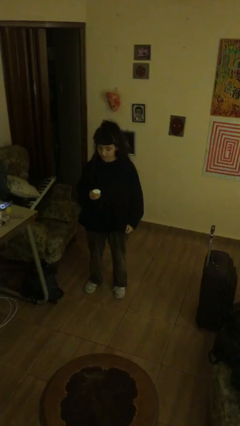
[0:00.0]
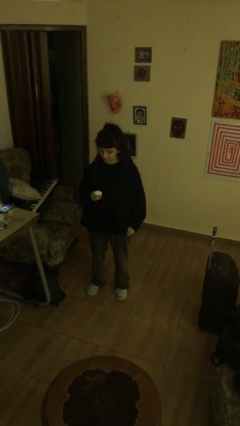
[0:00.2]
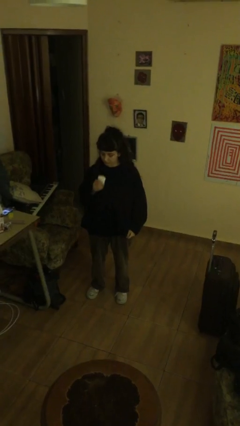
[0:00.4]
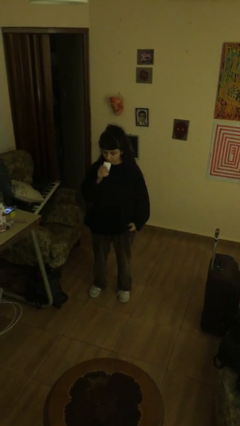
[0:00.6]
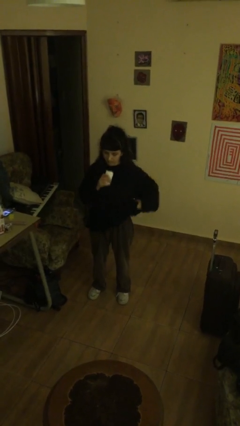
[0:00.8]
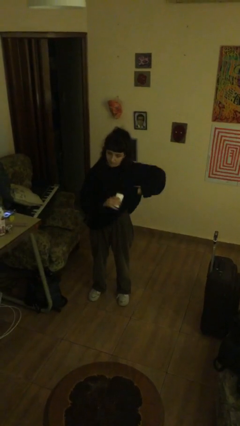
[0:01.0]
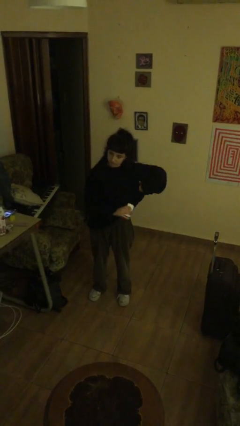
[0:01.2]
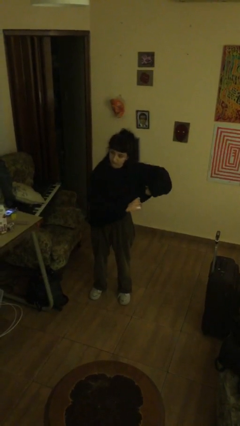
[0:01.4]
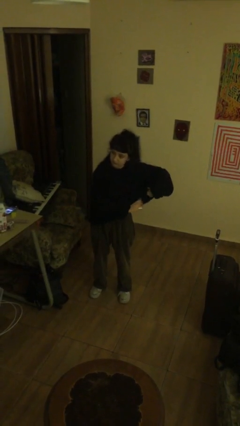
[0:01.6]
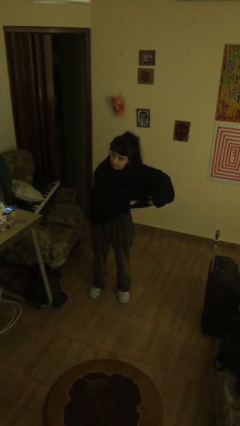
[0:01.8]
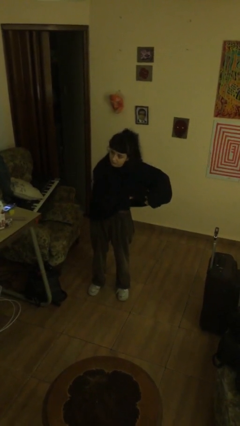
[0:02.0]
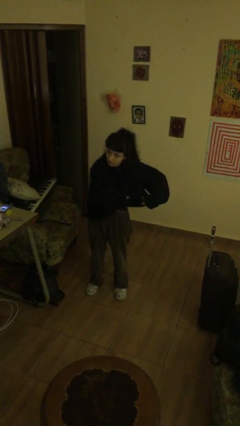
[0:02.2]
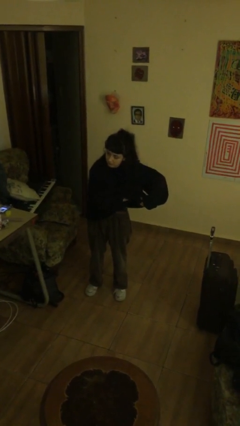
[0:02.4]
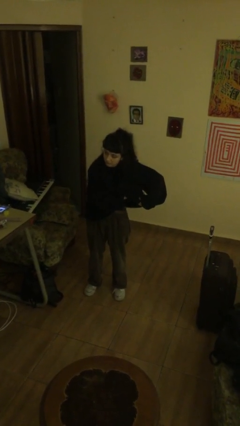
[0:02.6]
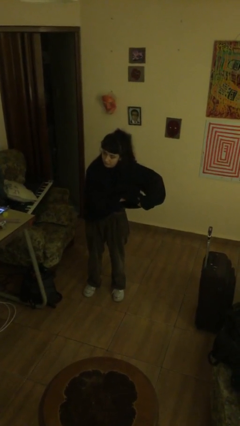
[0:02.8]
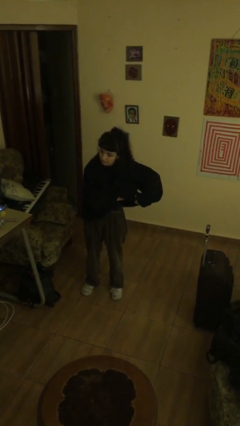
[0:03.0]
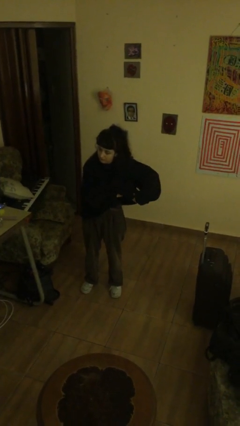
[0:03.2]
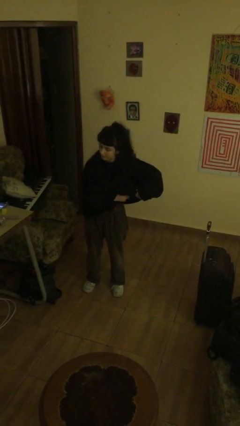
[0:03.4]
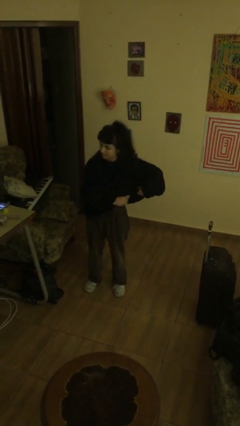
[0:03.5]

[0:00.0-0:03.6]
person applies deodorant

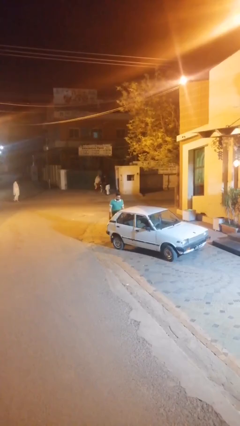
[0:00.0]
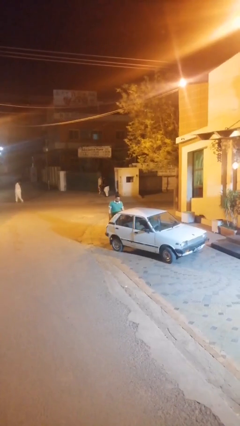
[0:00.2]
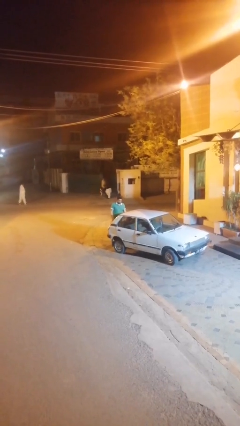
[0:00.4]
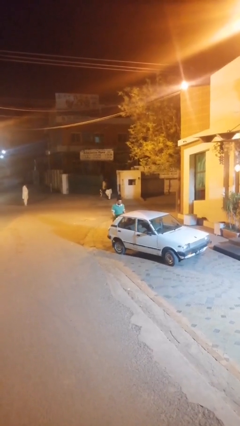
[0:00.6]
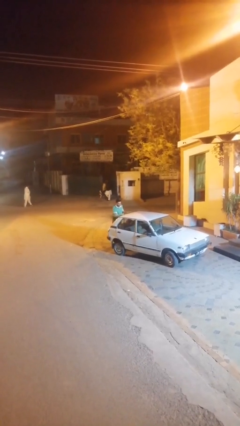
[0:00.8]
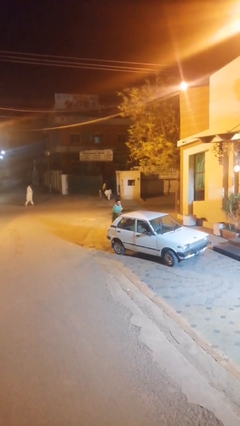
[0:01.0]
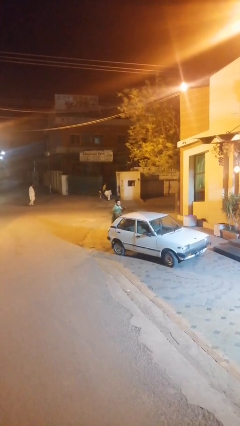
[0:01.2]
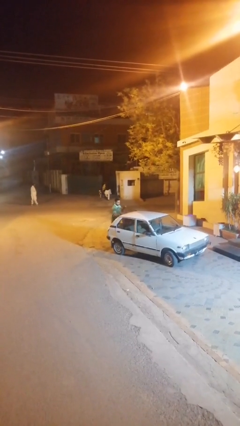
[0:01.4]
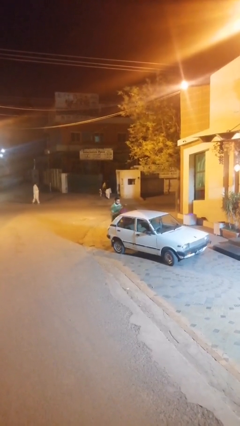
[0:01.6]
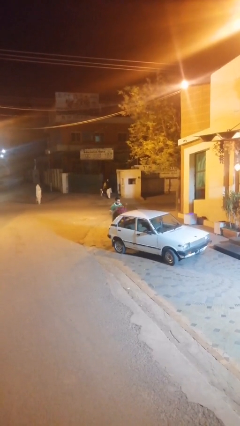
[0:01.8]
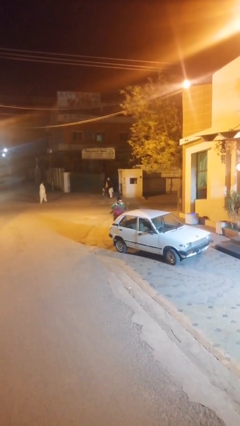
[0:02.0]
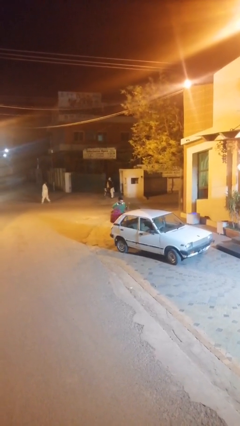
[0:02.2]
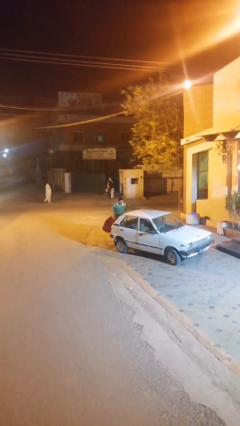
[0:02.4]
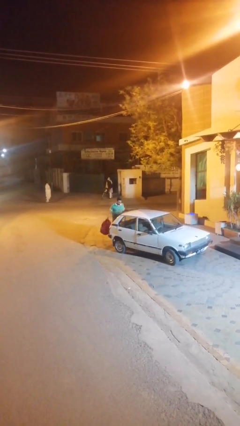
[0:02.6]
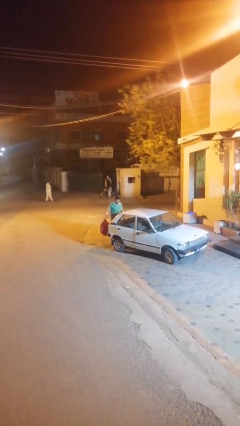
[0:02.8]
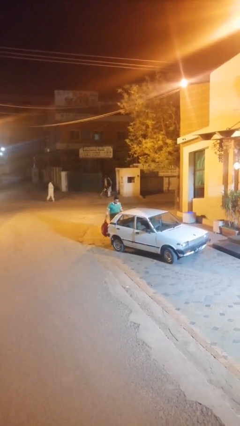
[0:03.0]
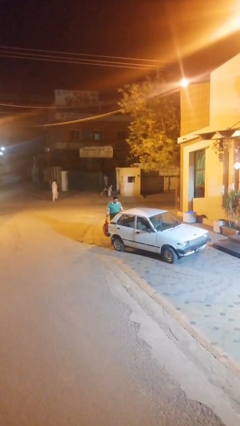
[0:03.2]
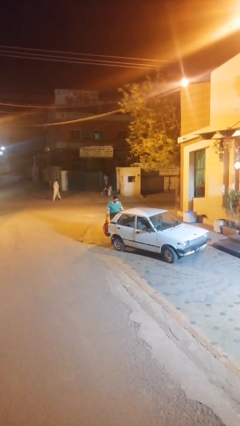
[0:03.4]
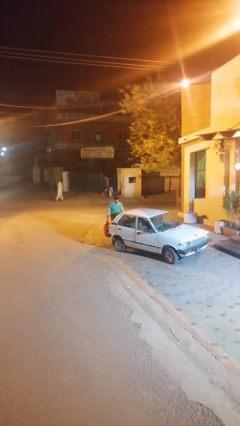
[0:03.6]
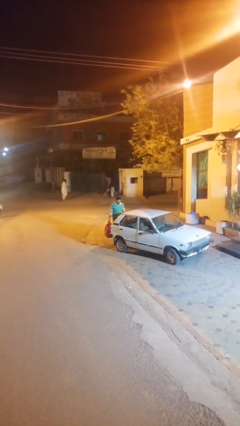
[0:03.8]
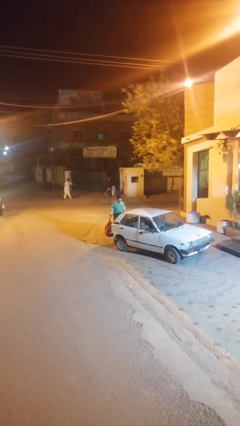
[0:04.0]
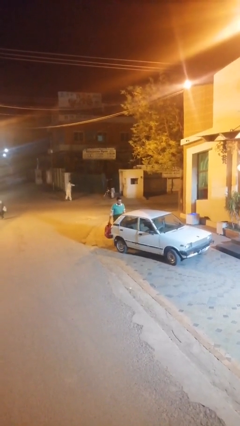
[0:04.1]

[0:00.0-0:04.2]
person unloads car

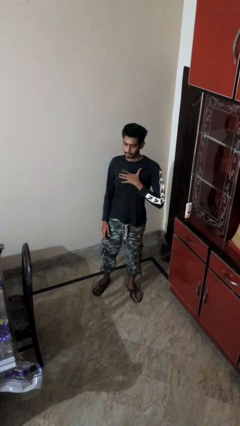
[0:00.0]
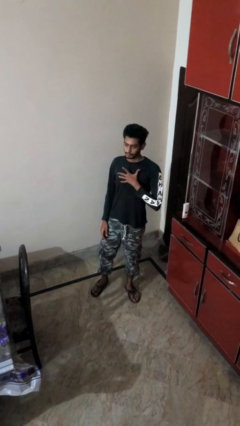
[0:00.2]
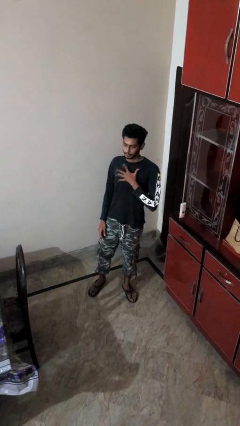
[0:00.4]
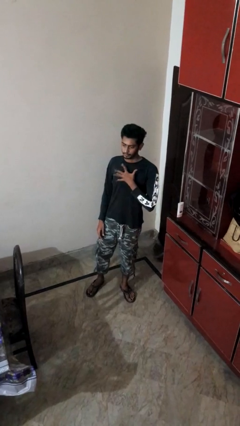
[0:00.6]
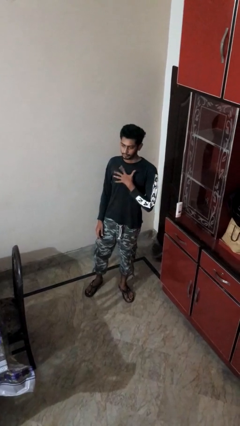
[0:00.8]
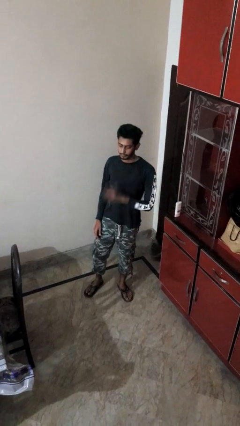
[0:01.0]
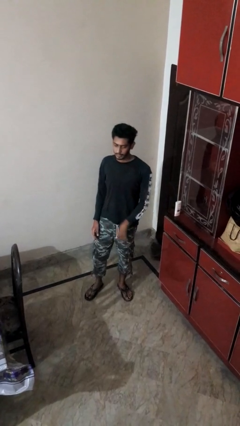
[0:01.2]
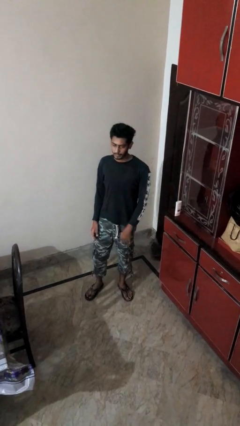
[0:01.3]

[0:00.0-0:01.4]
person drums on chest

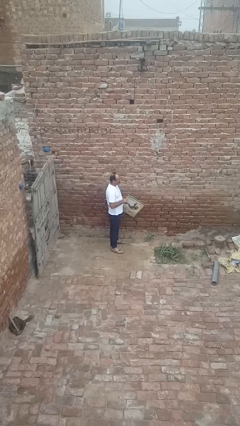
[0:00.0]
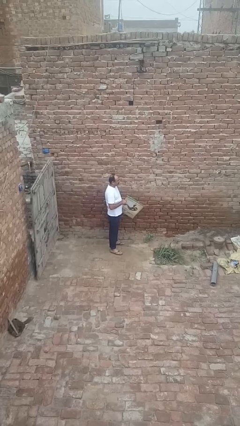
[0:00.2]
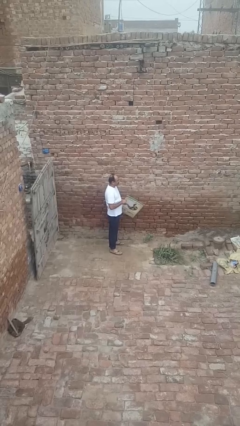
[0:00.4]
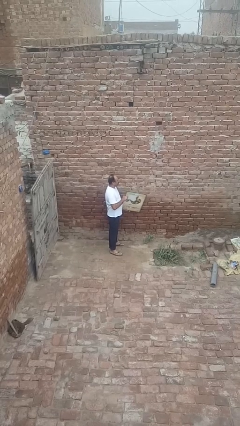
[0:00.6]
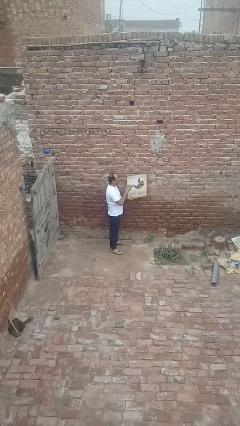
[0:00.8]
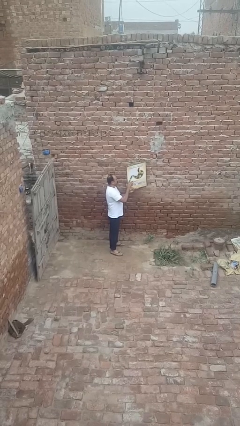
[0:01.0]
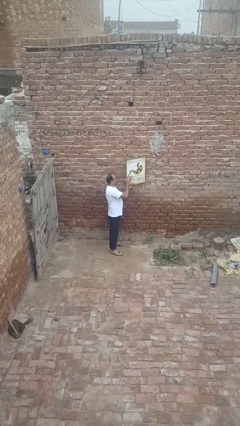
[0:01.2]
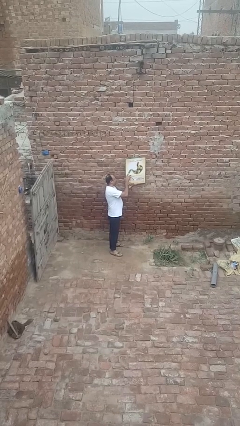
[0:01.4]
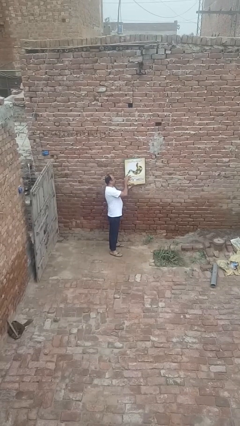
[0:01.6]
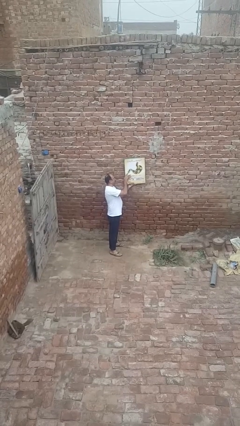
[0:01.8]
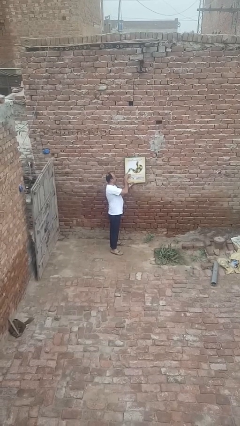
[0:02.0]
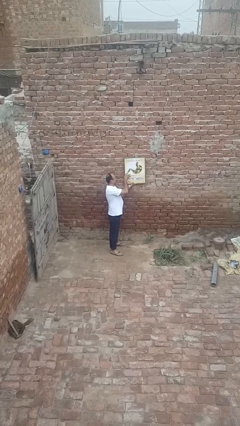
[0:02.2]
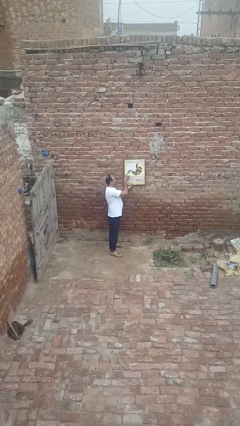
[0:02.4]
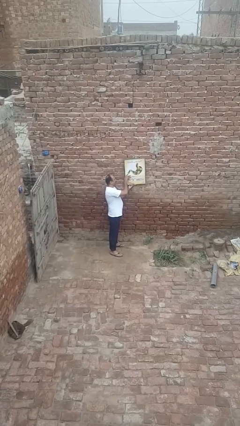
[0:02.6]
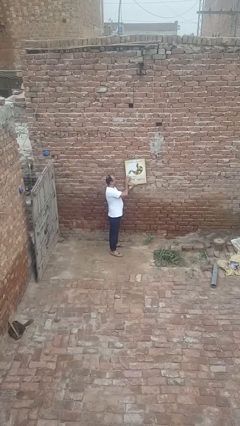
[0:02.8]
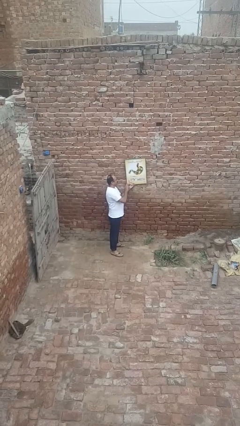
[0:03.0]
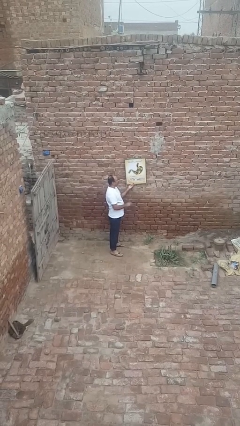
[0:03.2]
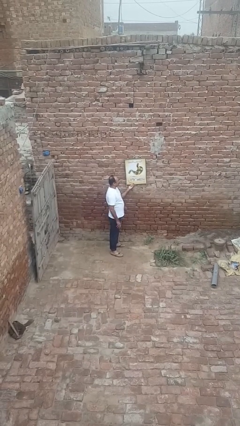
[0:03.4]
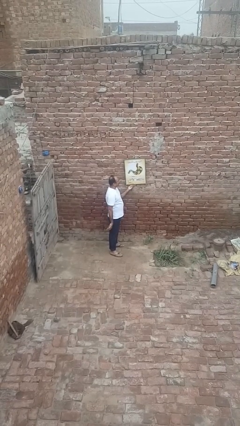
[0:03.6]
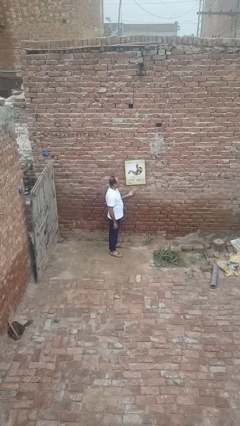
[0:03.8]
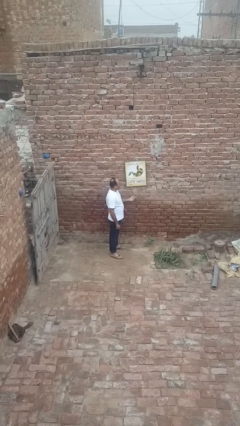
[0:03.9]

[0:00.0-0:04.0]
person puts up picture frame

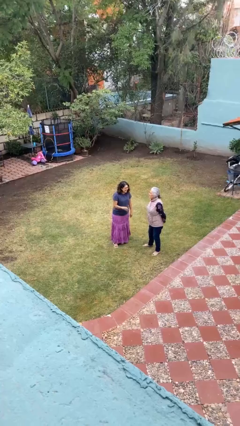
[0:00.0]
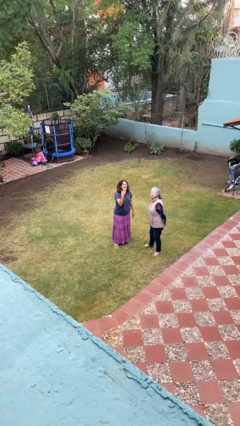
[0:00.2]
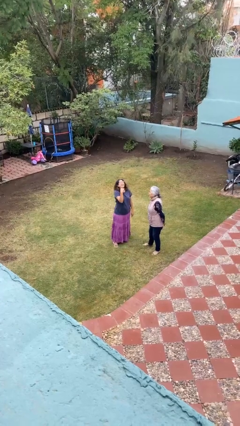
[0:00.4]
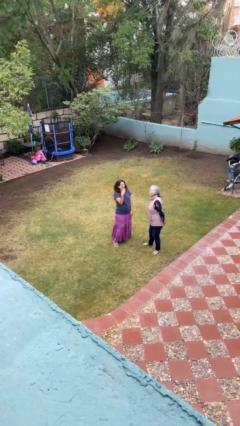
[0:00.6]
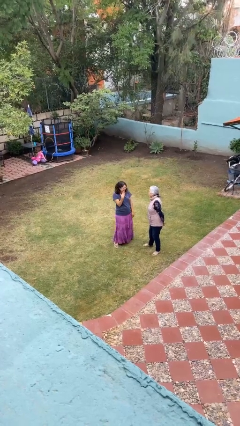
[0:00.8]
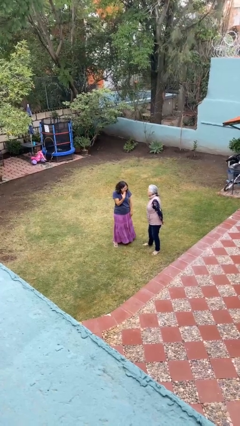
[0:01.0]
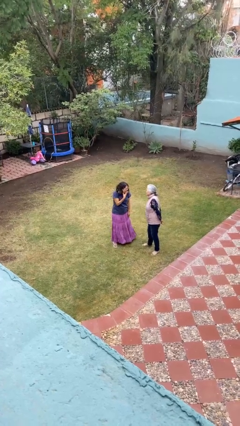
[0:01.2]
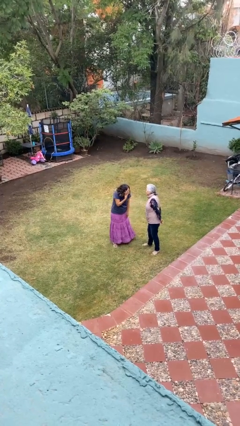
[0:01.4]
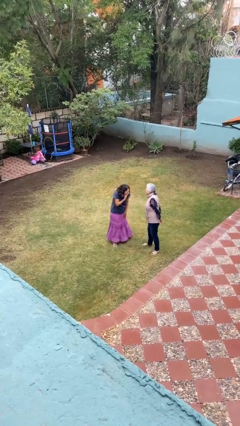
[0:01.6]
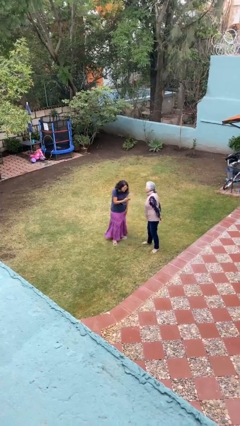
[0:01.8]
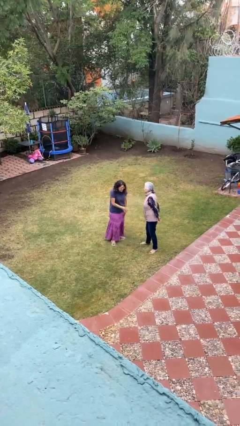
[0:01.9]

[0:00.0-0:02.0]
person laughs with person

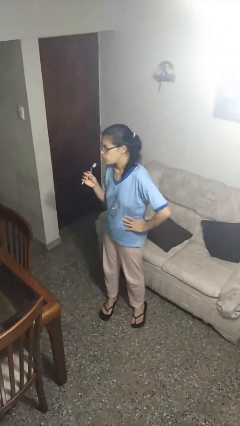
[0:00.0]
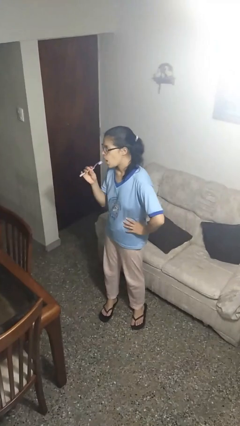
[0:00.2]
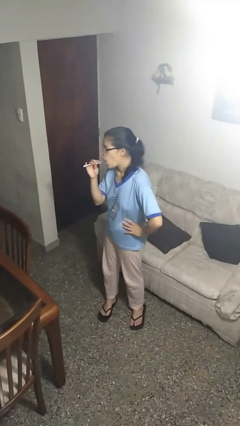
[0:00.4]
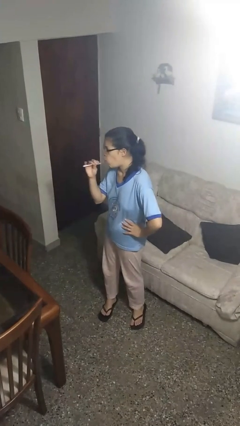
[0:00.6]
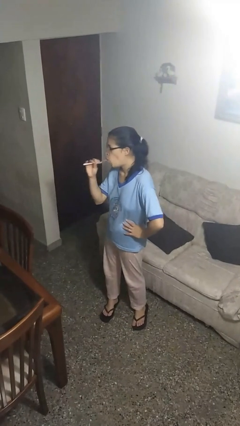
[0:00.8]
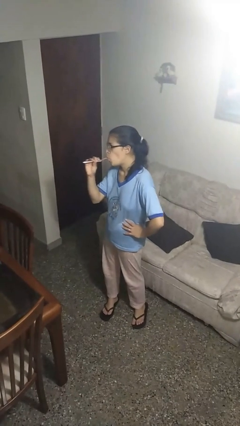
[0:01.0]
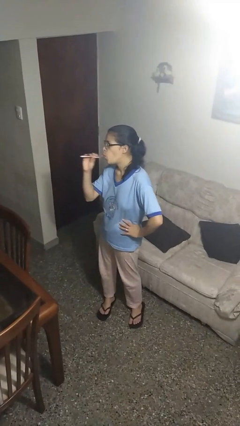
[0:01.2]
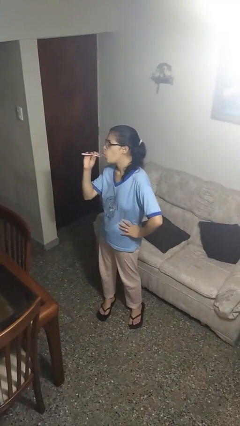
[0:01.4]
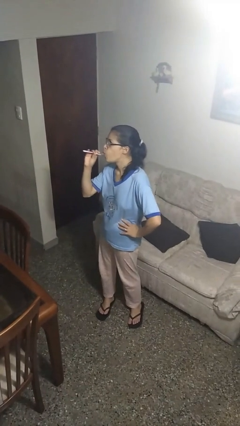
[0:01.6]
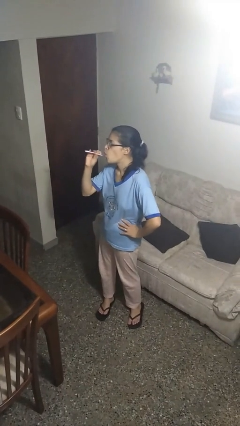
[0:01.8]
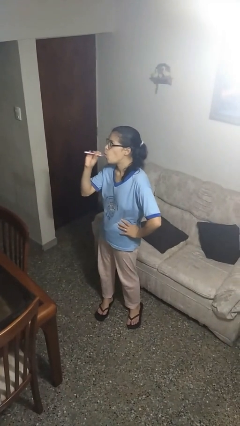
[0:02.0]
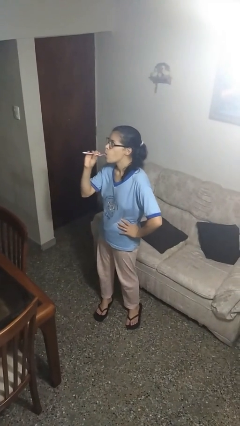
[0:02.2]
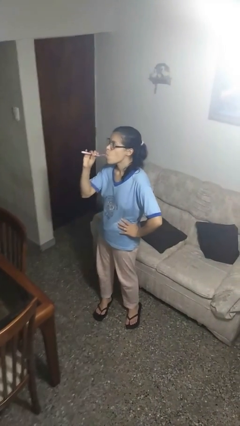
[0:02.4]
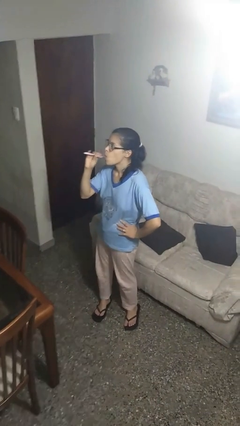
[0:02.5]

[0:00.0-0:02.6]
person brushes teeth
